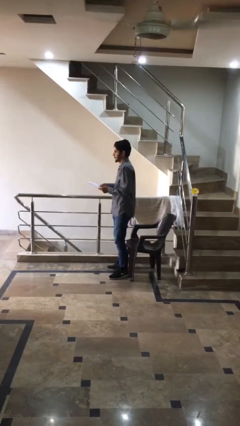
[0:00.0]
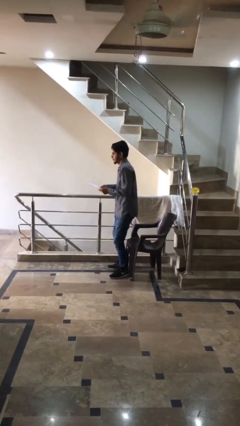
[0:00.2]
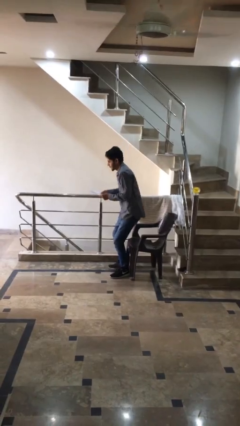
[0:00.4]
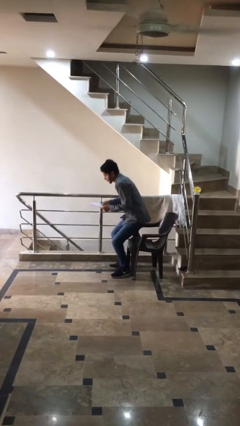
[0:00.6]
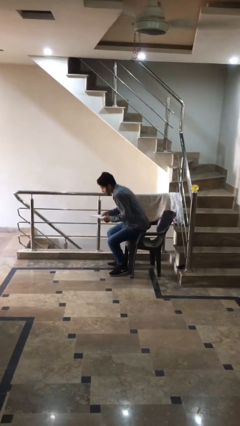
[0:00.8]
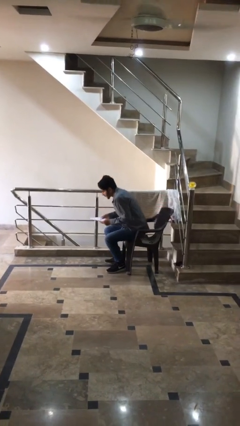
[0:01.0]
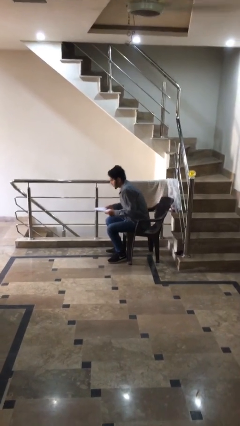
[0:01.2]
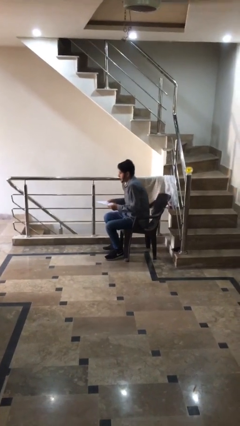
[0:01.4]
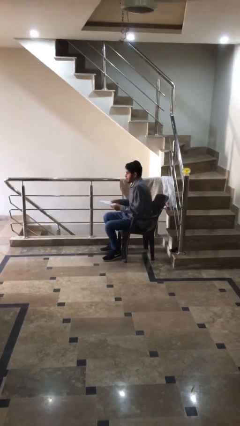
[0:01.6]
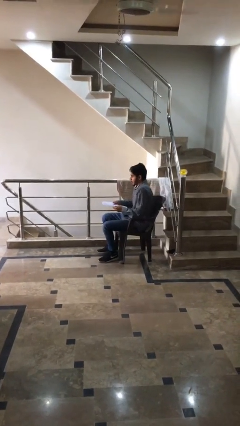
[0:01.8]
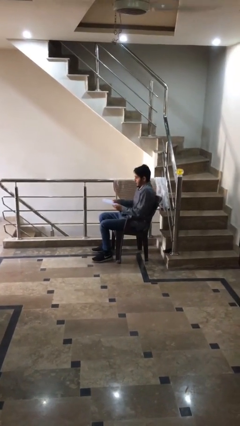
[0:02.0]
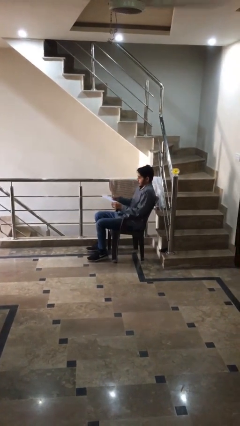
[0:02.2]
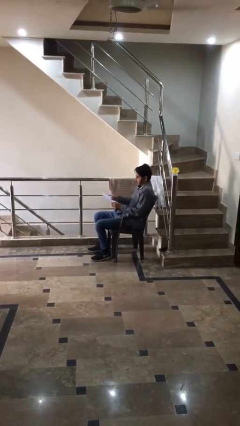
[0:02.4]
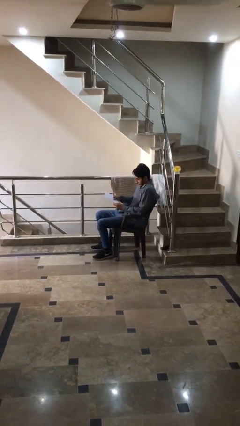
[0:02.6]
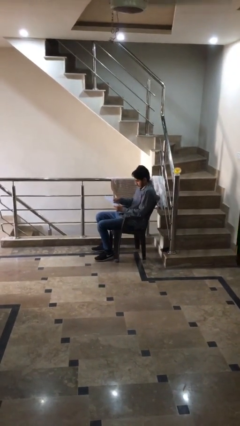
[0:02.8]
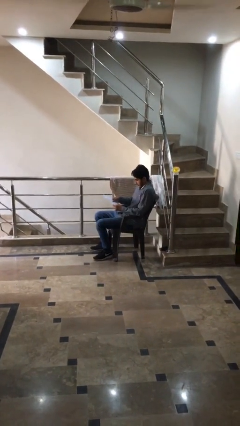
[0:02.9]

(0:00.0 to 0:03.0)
person sits down

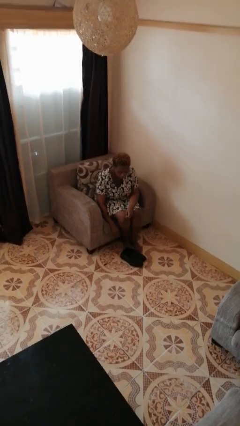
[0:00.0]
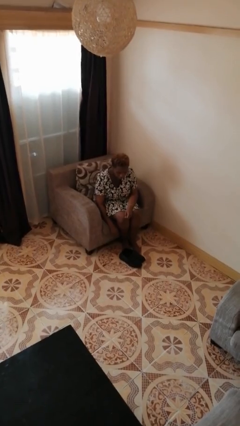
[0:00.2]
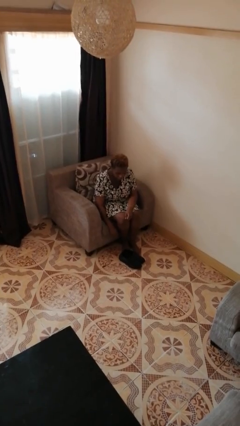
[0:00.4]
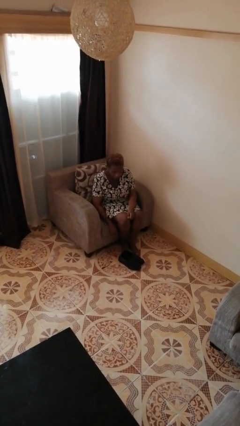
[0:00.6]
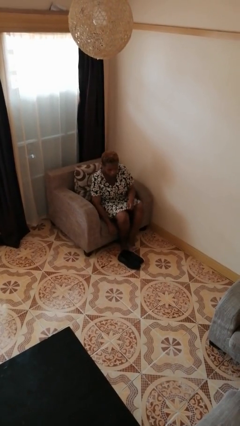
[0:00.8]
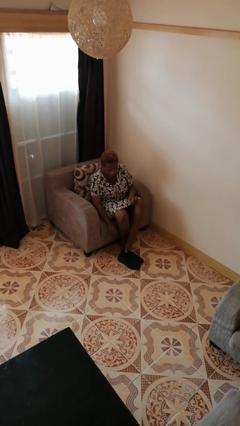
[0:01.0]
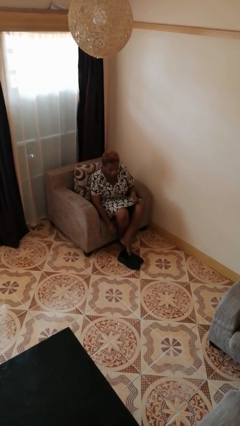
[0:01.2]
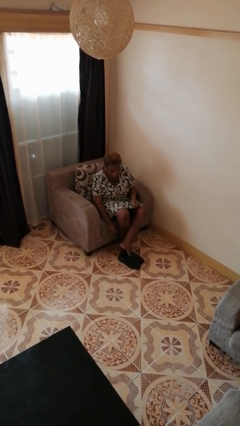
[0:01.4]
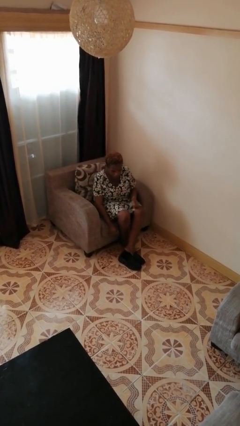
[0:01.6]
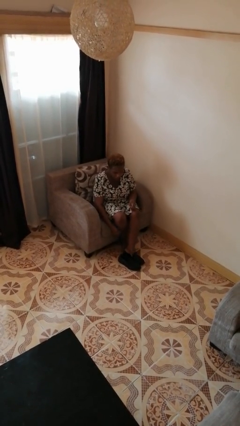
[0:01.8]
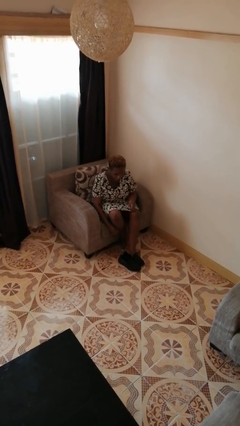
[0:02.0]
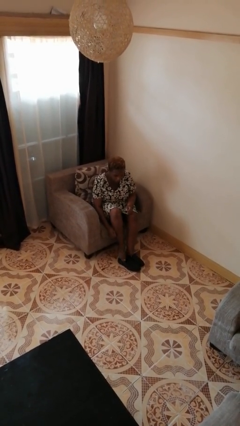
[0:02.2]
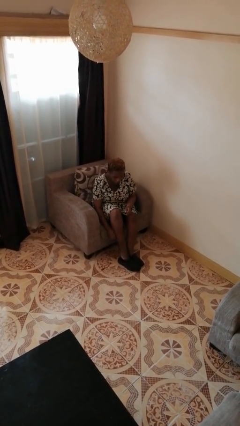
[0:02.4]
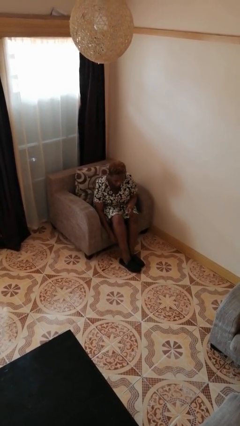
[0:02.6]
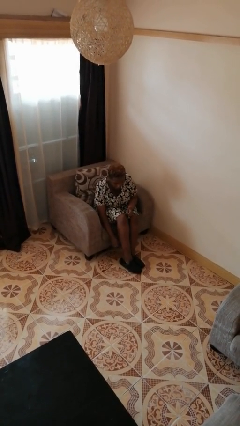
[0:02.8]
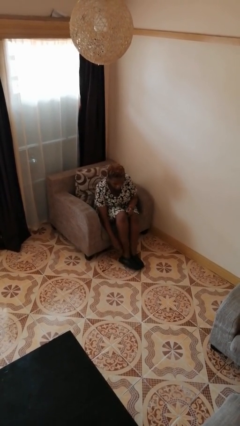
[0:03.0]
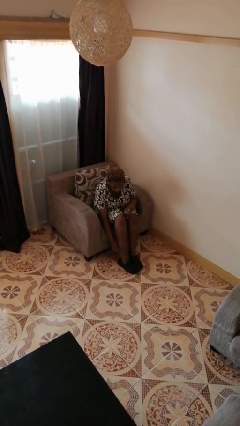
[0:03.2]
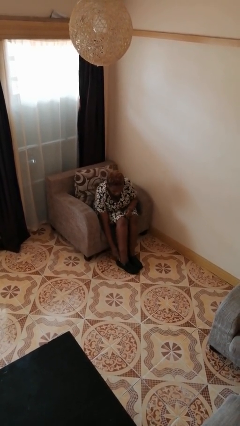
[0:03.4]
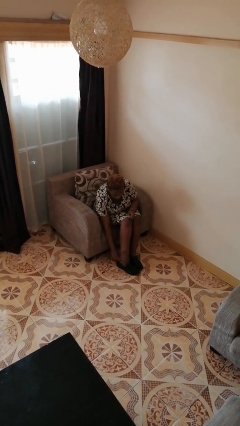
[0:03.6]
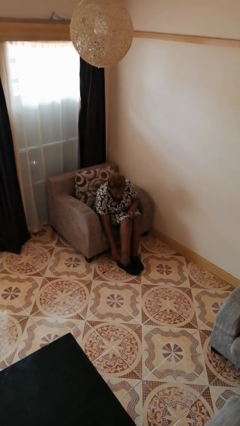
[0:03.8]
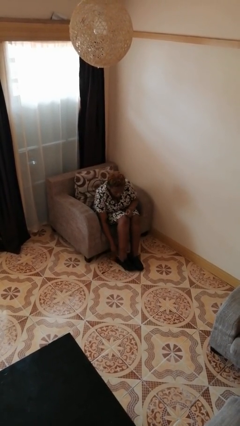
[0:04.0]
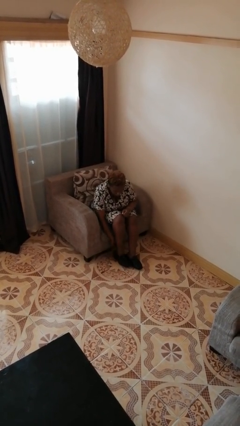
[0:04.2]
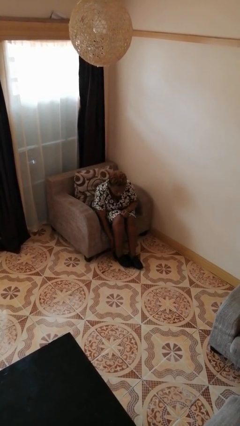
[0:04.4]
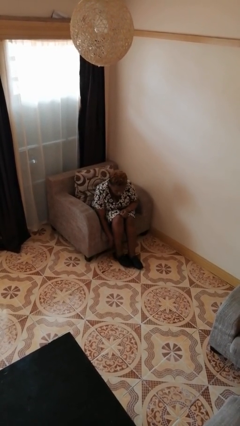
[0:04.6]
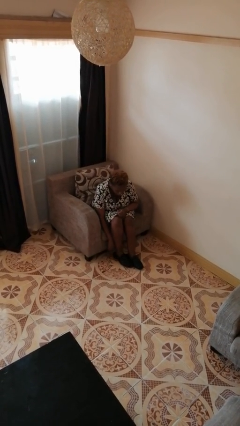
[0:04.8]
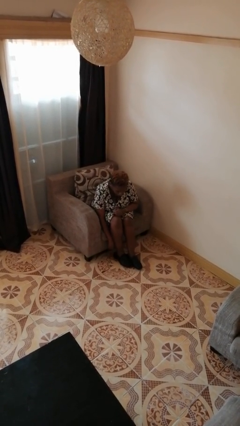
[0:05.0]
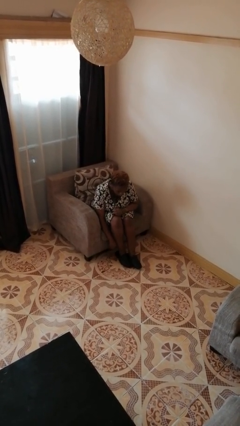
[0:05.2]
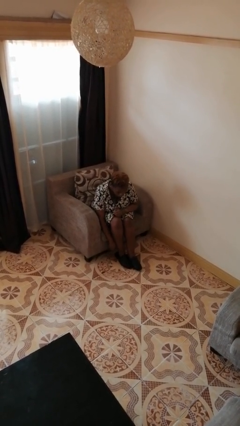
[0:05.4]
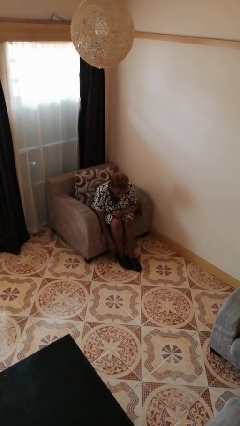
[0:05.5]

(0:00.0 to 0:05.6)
person puts on shoes

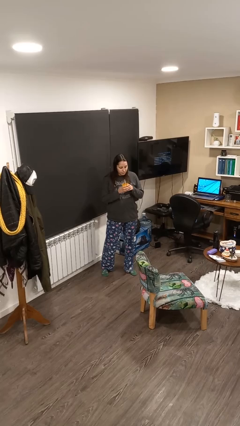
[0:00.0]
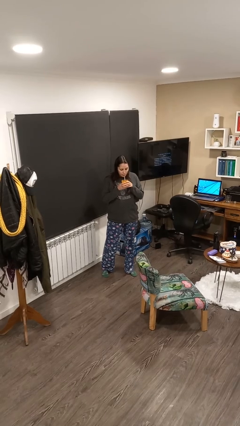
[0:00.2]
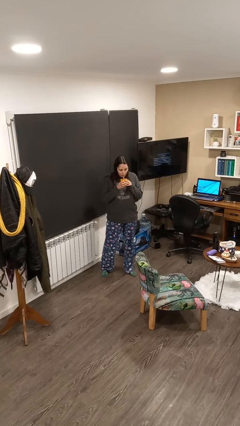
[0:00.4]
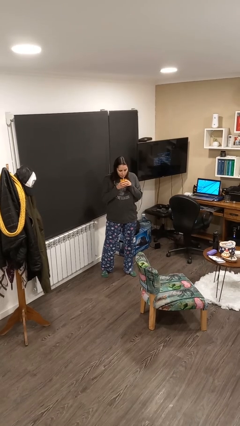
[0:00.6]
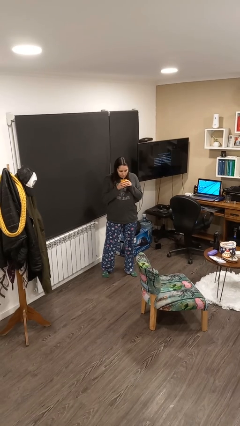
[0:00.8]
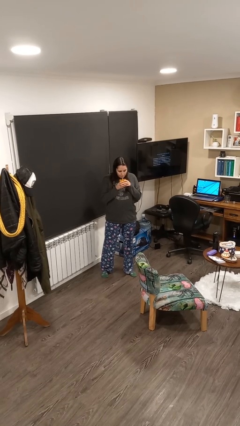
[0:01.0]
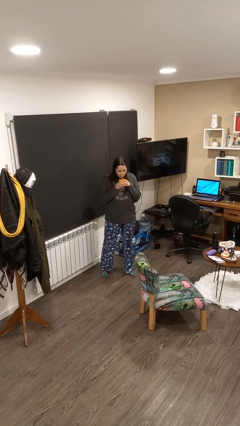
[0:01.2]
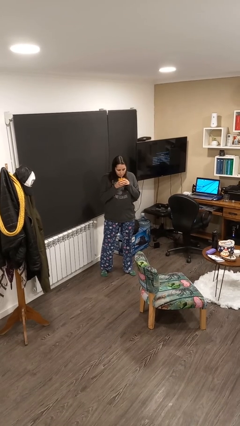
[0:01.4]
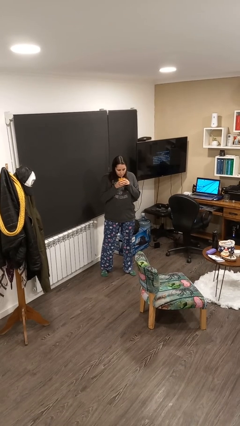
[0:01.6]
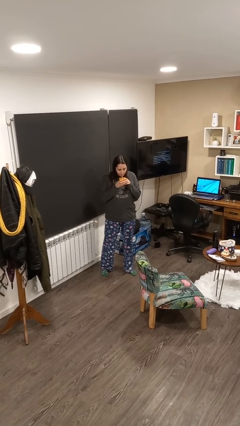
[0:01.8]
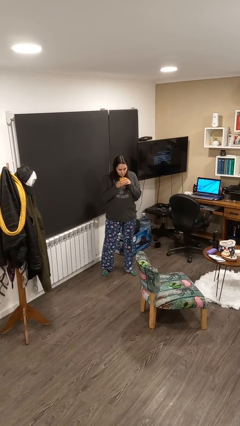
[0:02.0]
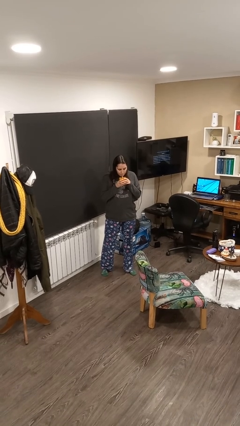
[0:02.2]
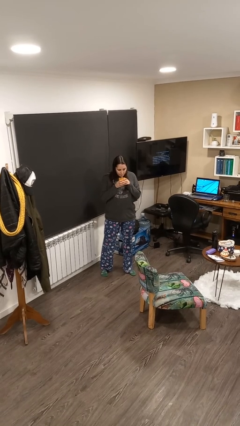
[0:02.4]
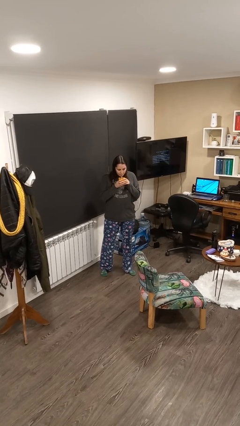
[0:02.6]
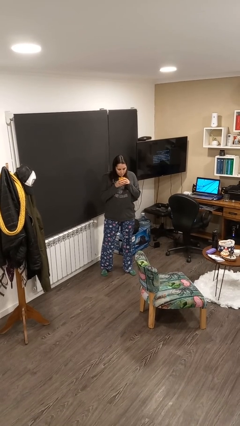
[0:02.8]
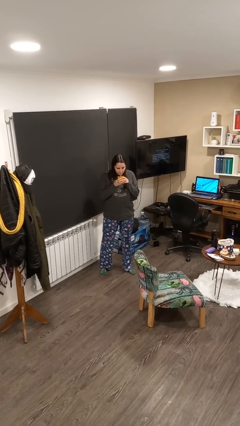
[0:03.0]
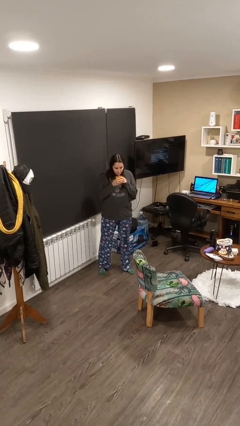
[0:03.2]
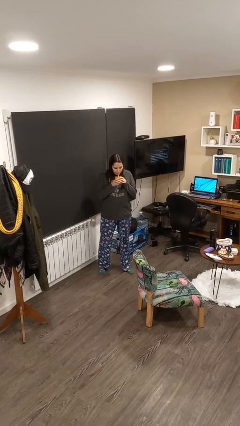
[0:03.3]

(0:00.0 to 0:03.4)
person drinks from straw

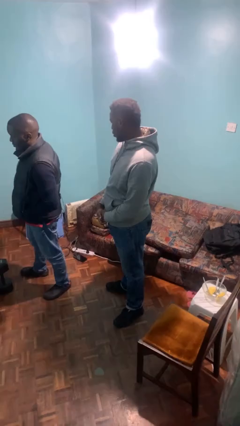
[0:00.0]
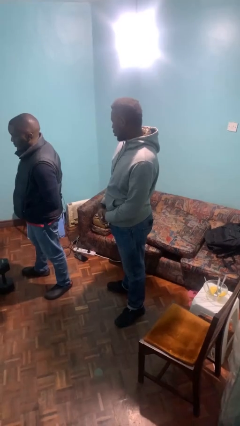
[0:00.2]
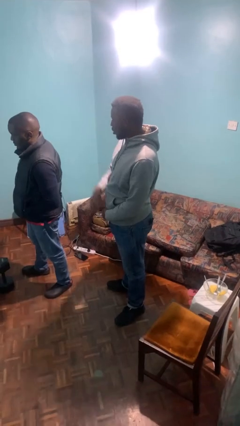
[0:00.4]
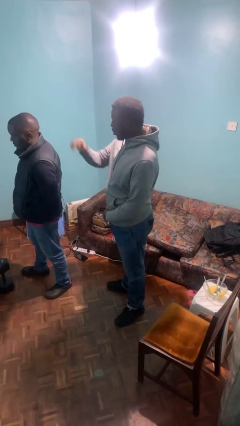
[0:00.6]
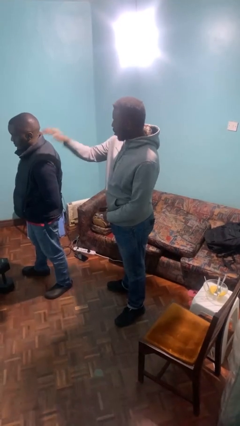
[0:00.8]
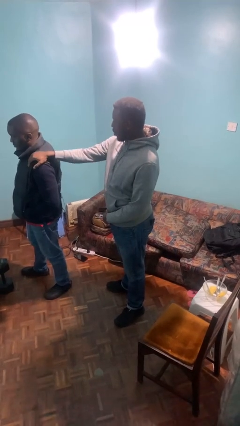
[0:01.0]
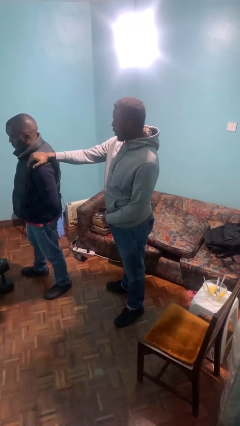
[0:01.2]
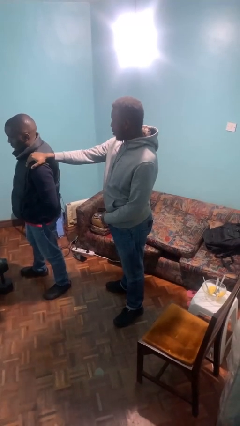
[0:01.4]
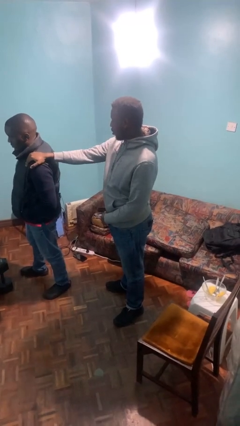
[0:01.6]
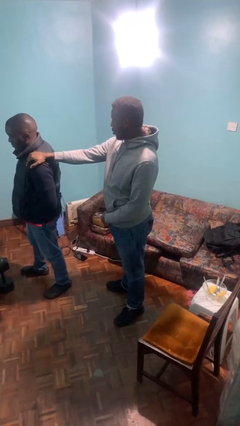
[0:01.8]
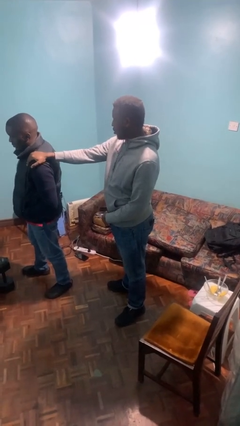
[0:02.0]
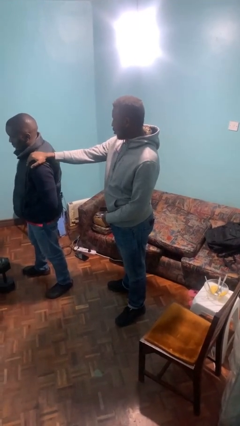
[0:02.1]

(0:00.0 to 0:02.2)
person grabs person by shoulder

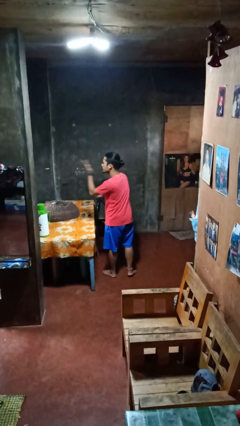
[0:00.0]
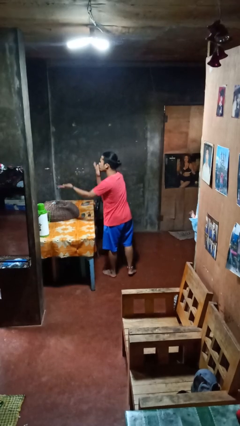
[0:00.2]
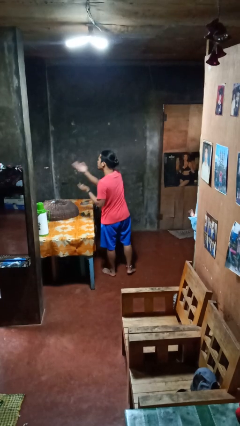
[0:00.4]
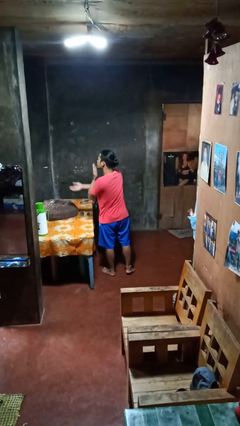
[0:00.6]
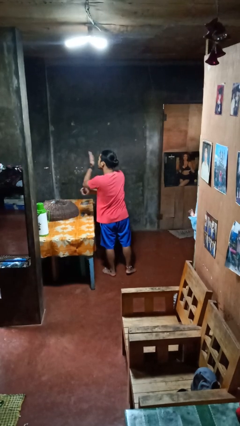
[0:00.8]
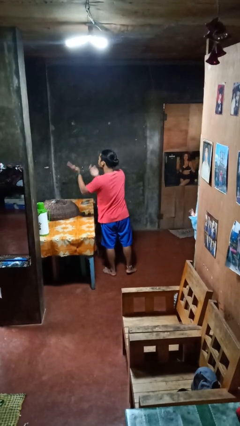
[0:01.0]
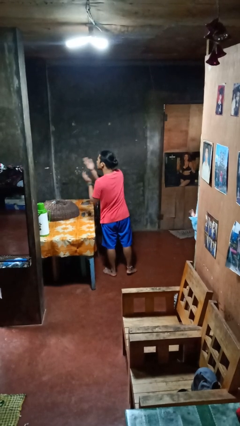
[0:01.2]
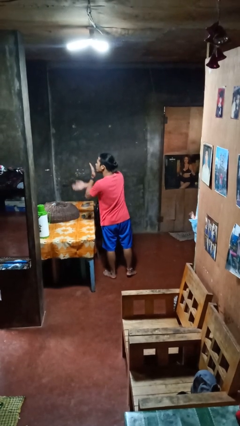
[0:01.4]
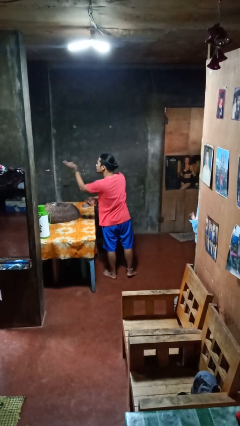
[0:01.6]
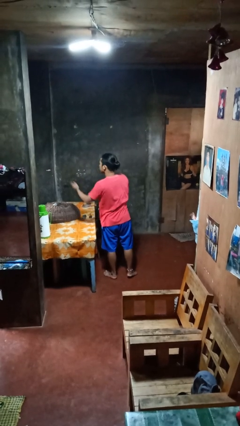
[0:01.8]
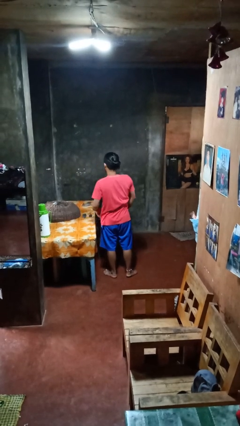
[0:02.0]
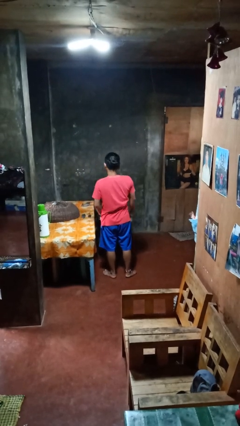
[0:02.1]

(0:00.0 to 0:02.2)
person gestures blow kiss

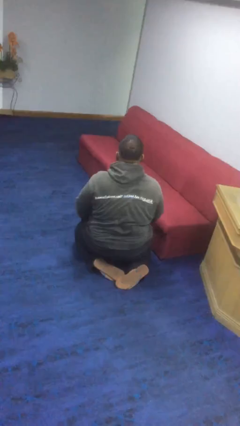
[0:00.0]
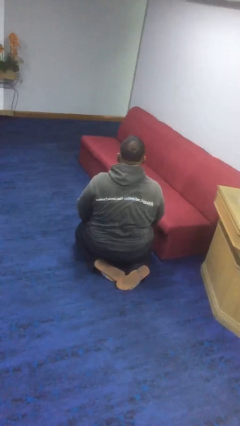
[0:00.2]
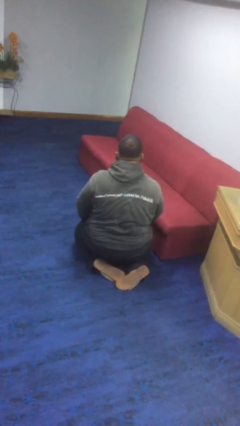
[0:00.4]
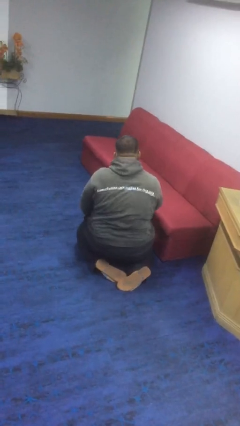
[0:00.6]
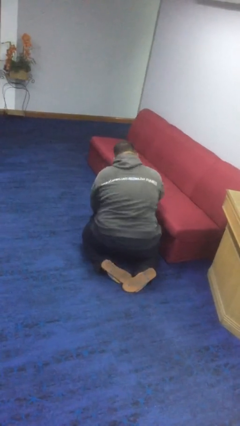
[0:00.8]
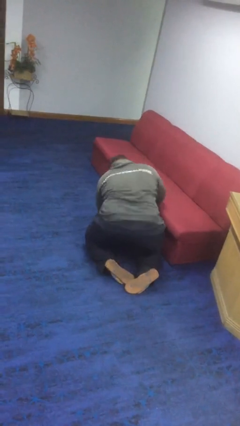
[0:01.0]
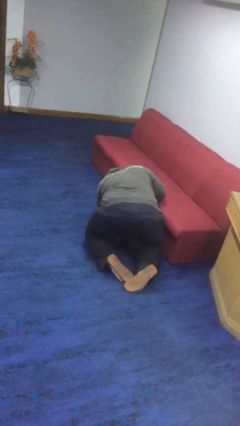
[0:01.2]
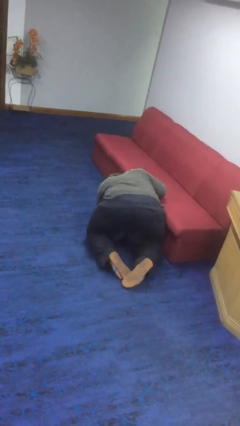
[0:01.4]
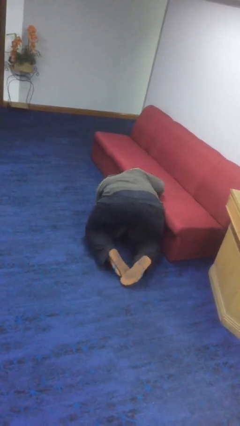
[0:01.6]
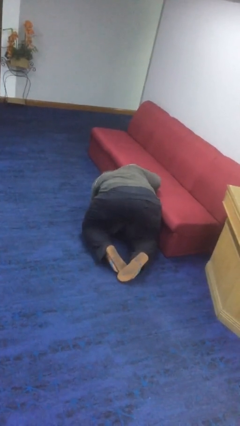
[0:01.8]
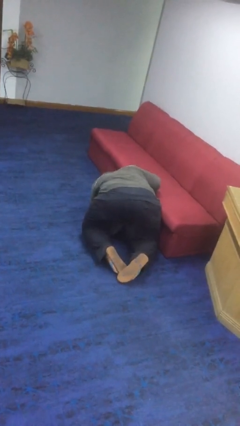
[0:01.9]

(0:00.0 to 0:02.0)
person searches under couch
